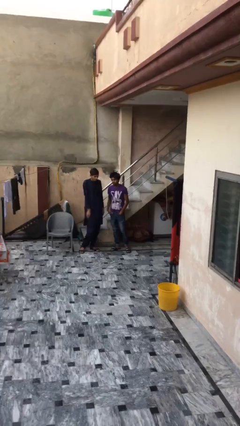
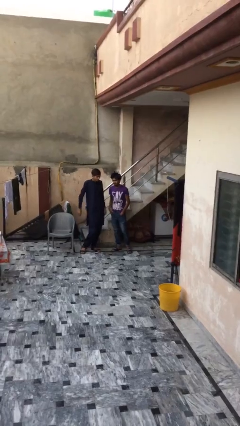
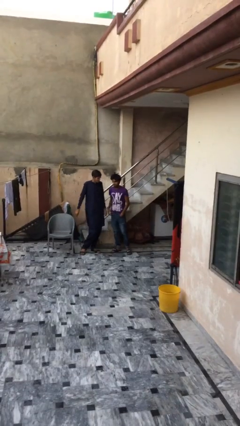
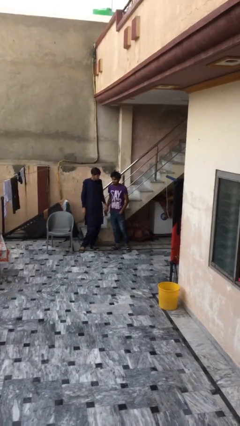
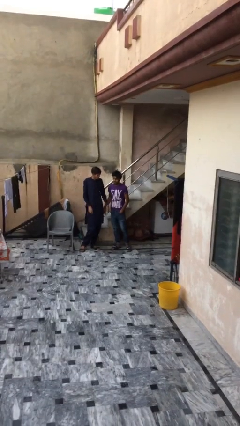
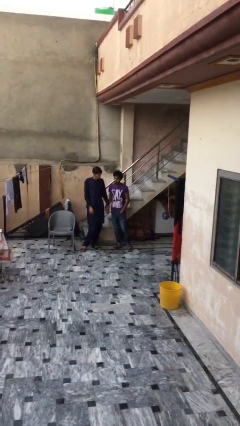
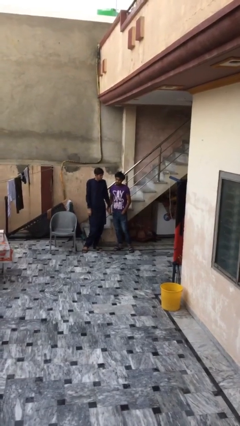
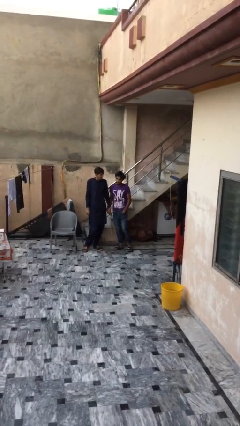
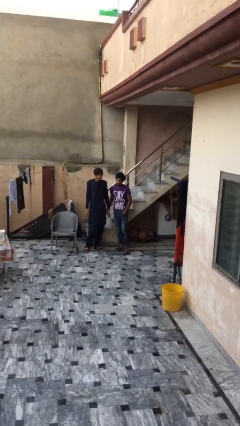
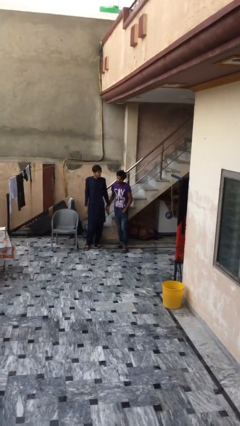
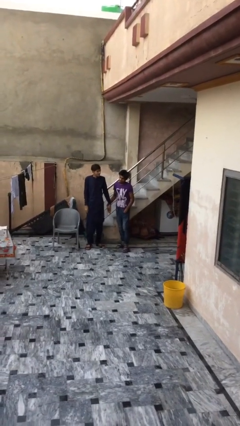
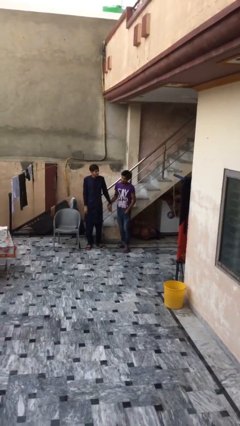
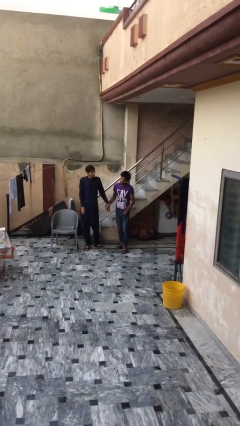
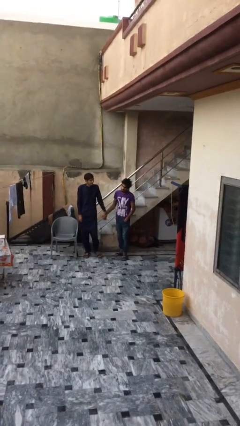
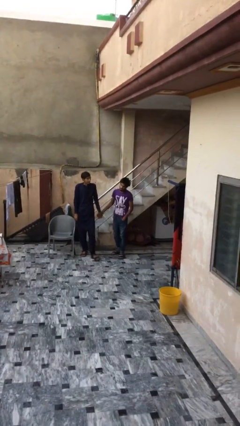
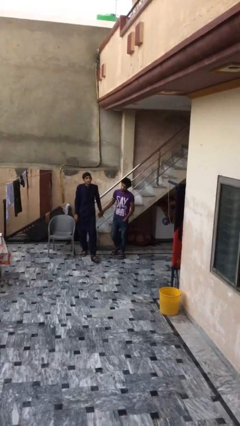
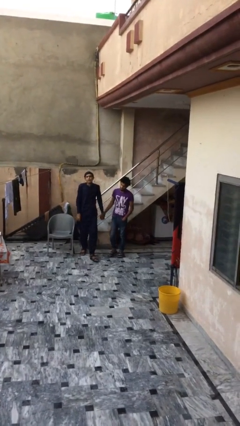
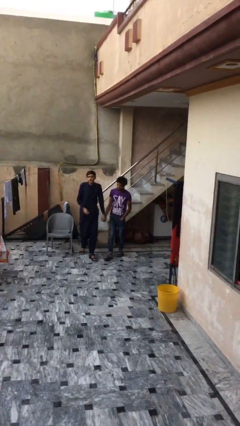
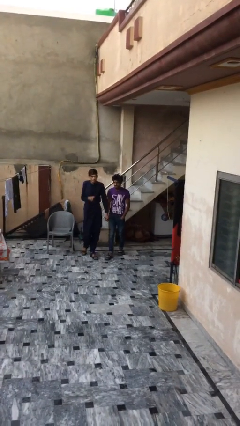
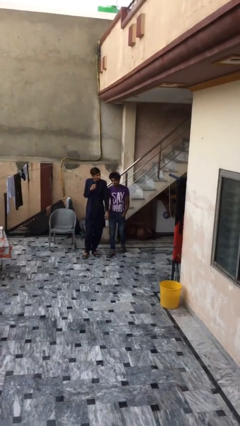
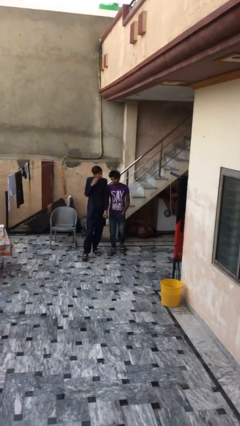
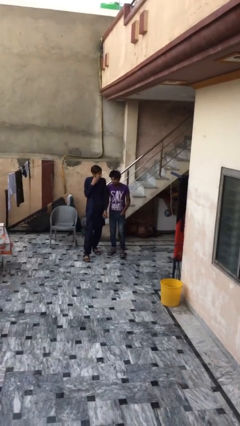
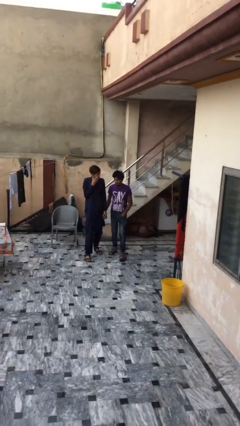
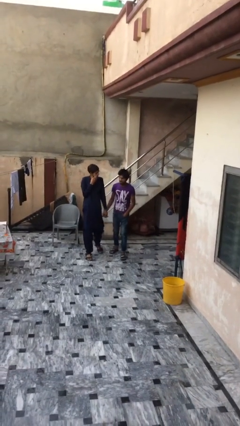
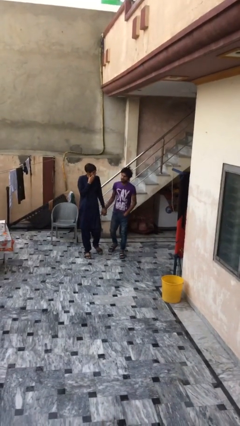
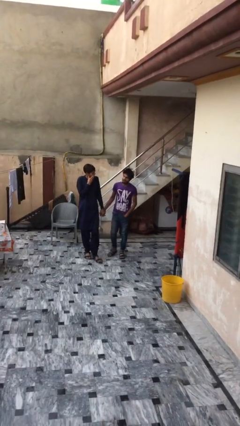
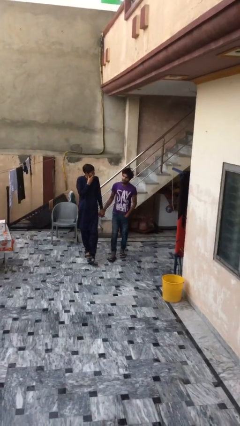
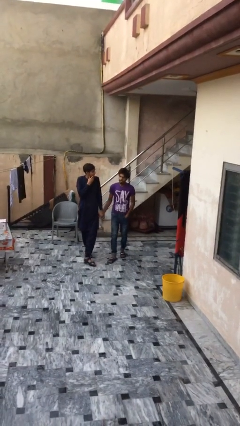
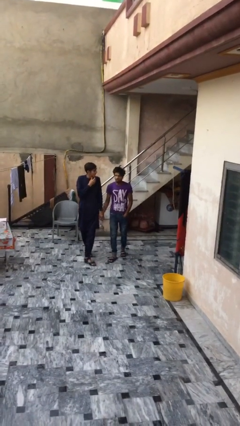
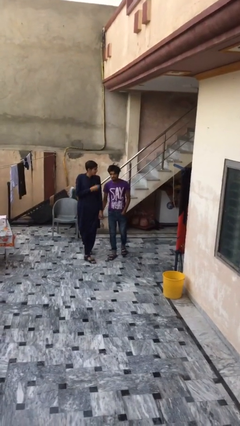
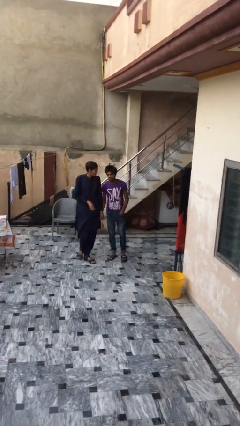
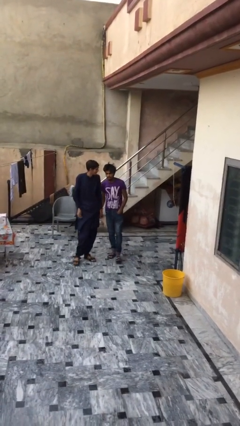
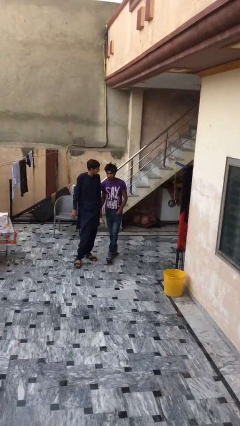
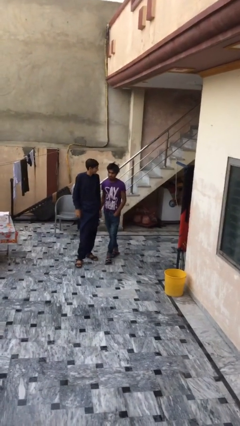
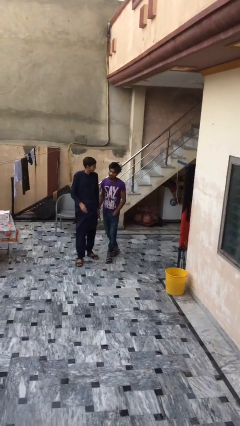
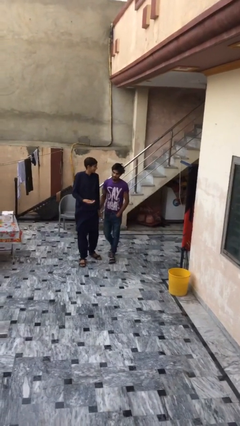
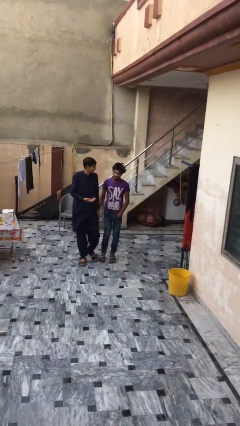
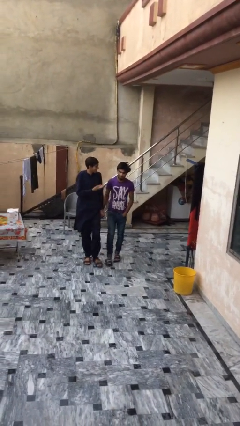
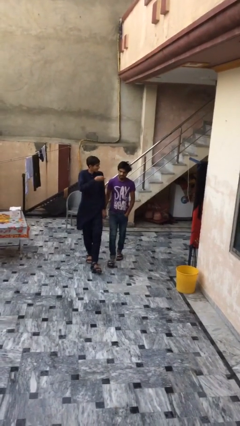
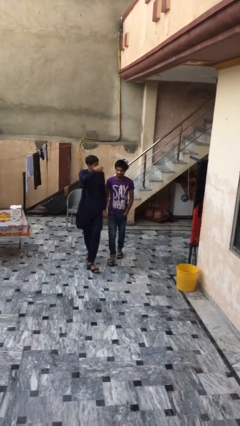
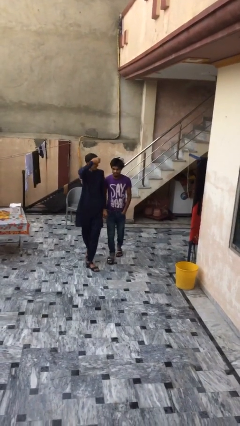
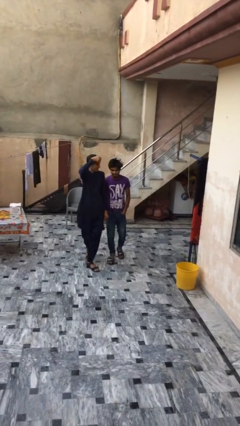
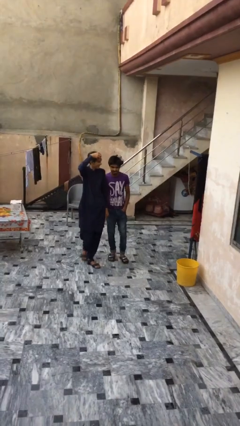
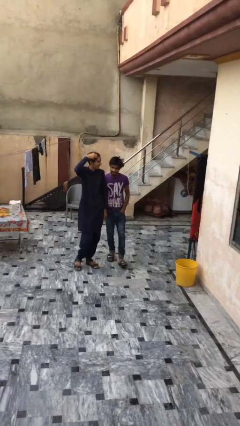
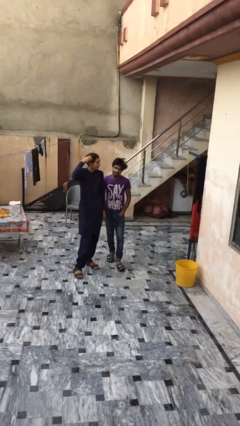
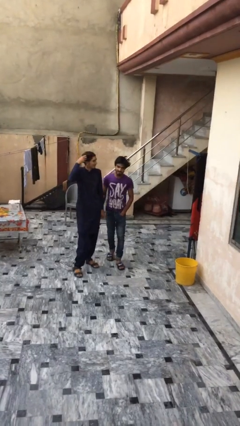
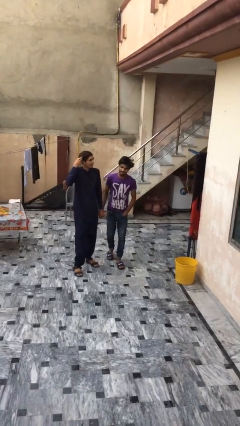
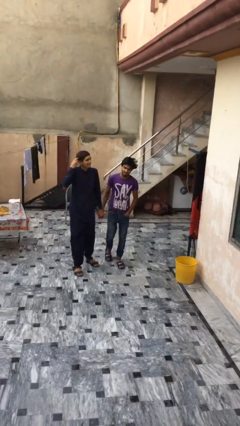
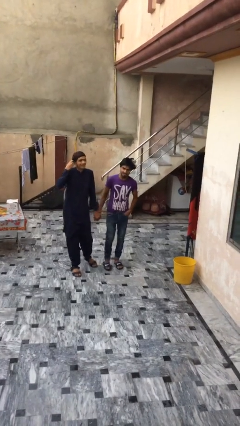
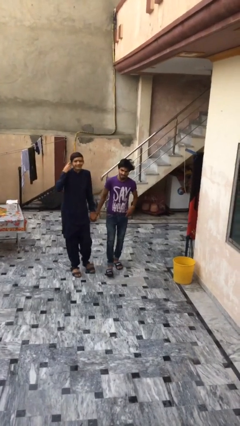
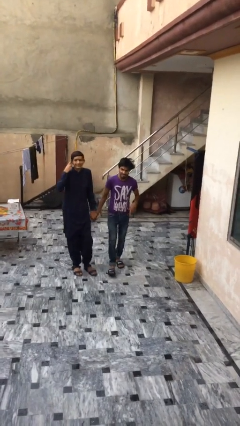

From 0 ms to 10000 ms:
person holds hand

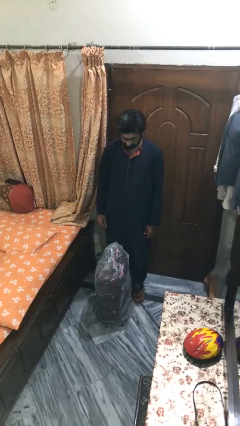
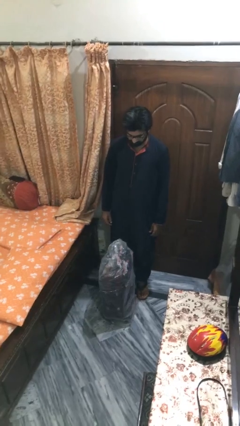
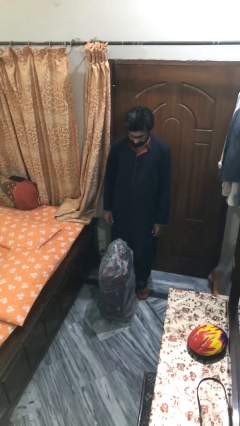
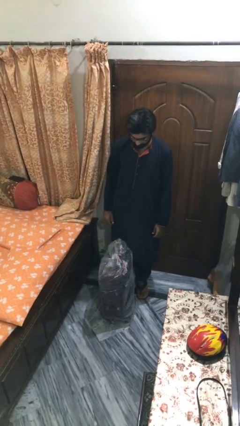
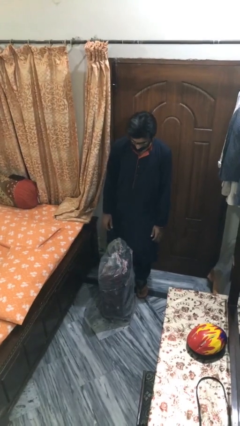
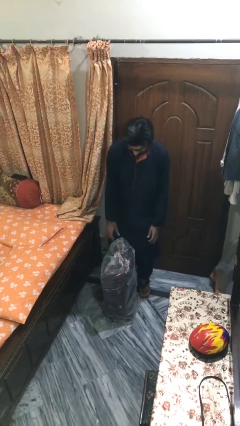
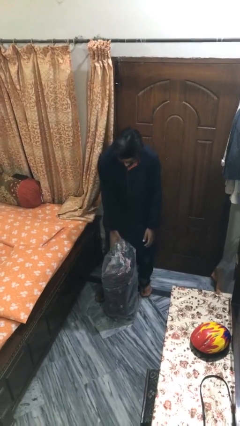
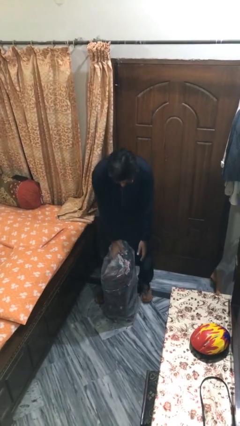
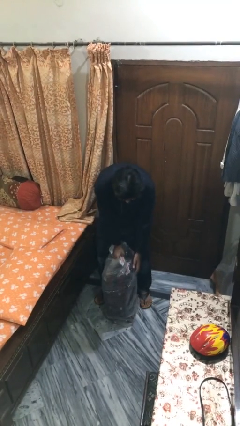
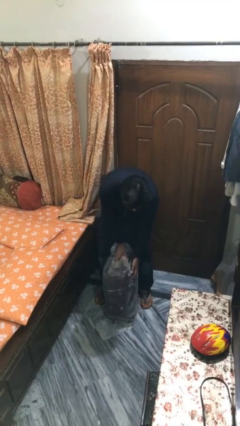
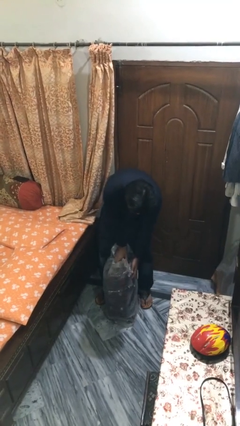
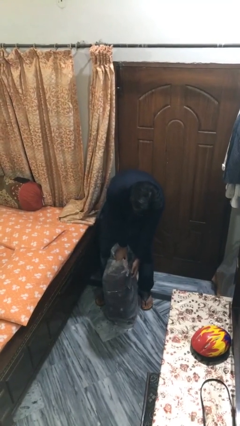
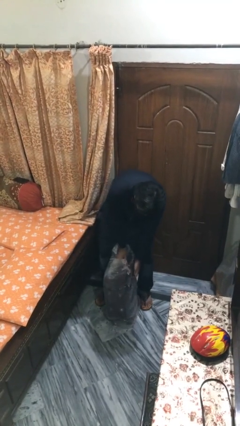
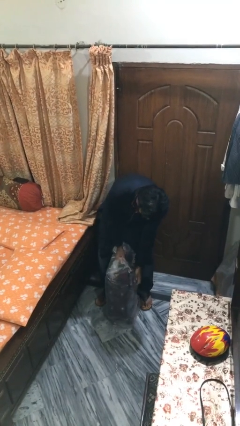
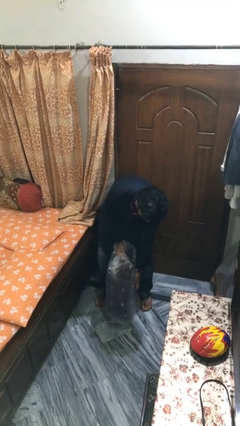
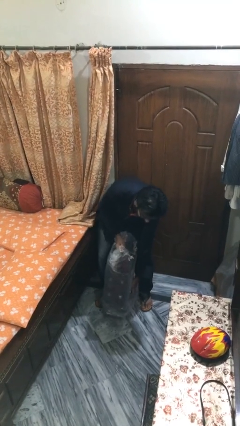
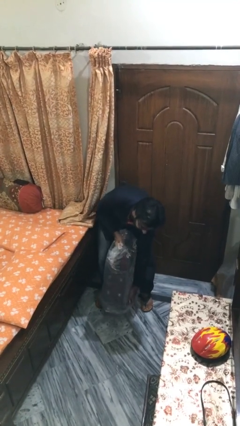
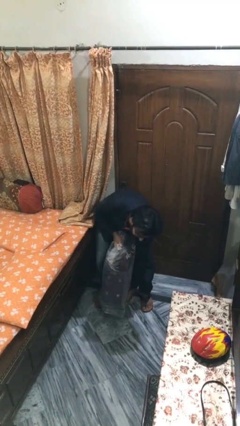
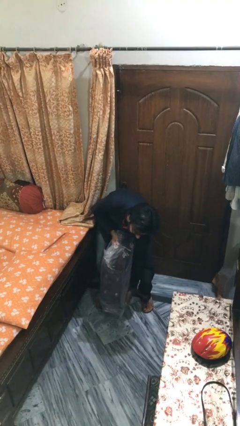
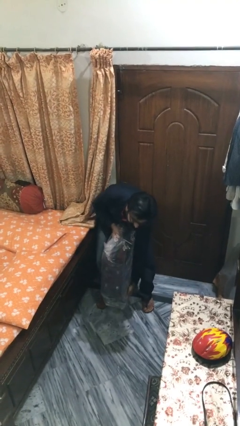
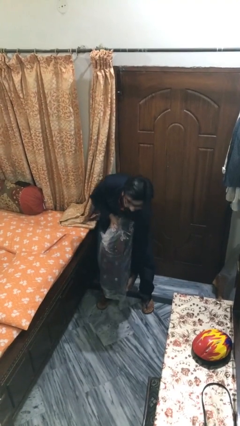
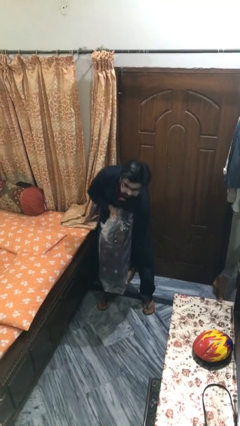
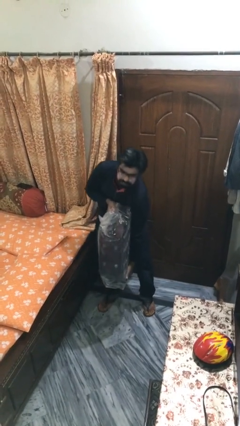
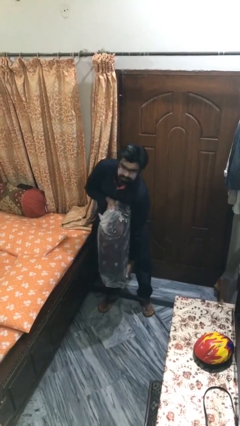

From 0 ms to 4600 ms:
person picks up object from floor

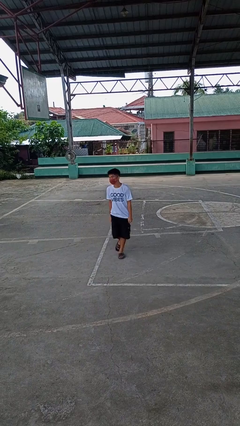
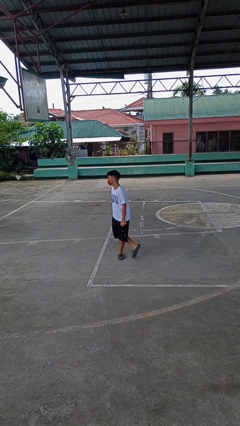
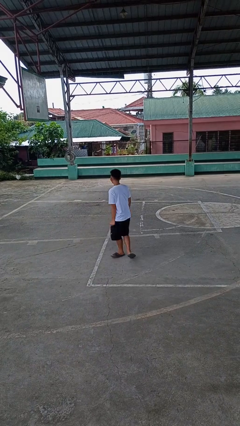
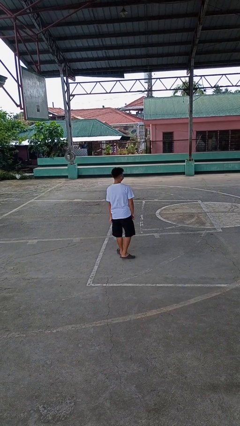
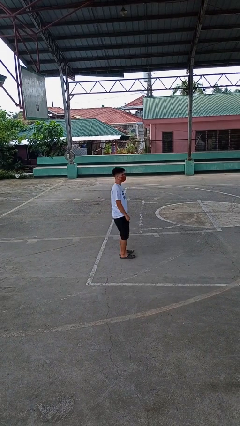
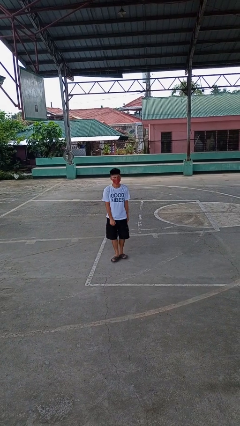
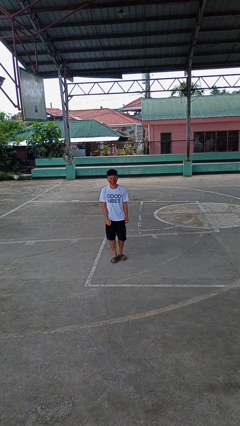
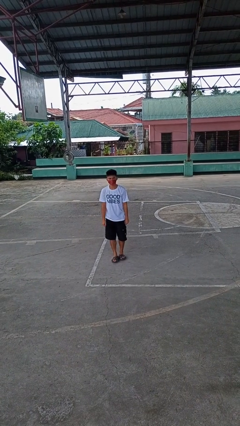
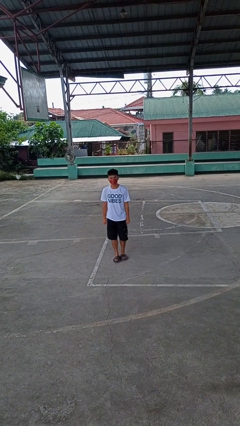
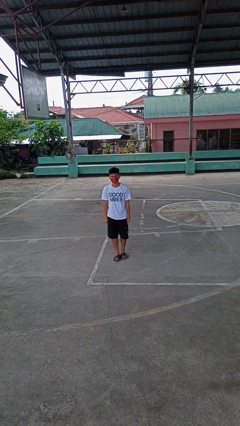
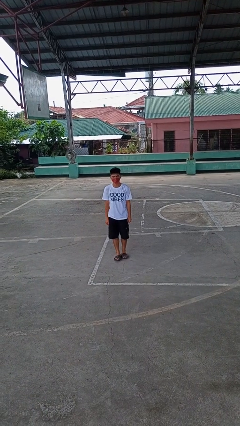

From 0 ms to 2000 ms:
person twirls

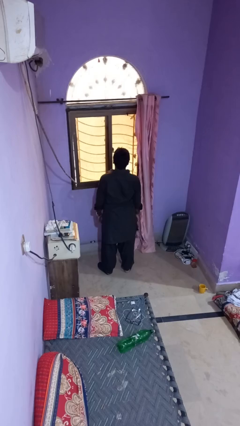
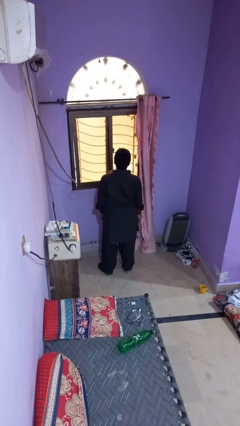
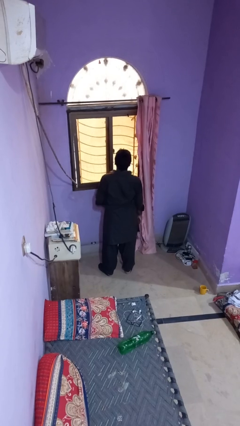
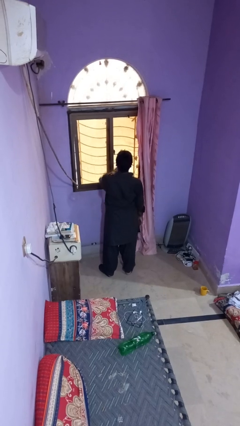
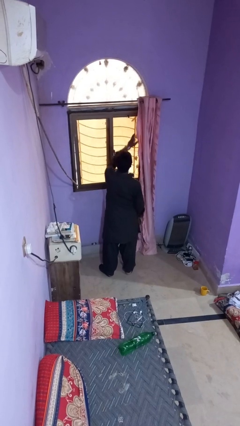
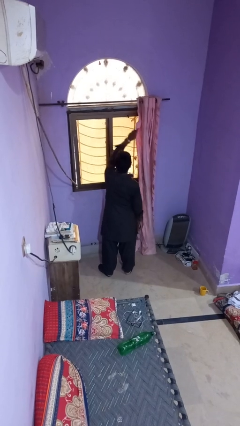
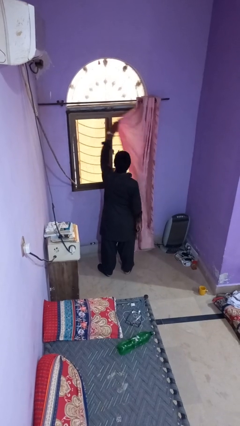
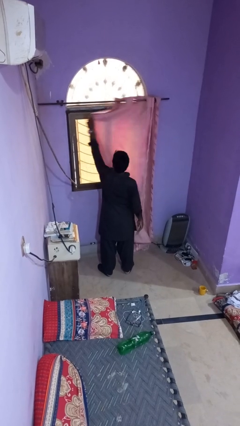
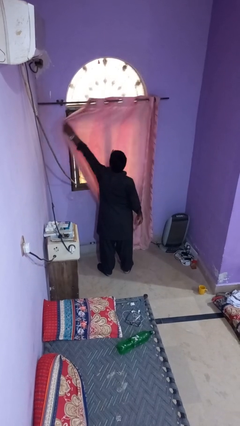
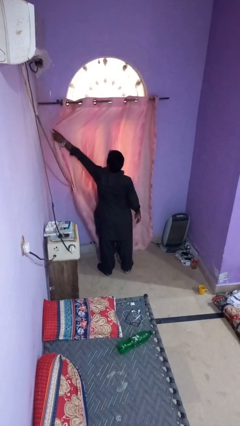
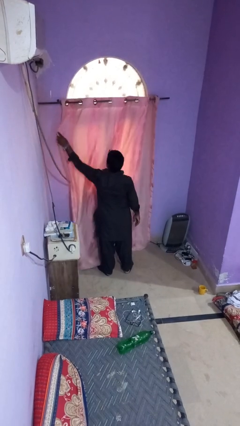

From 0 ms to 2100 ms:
person closes curtains
